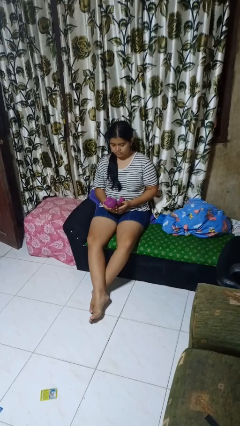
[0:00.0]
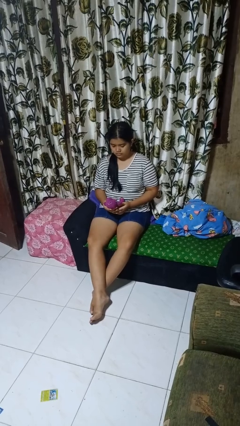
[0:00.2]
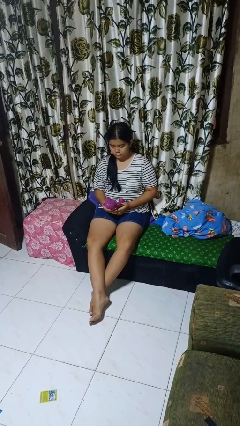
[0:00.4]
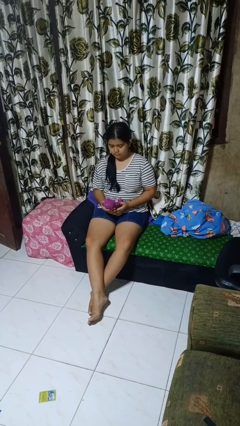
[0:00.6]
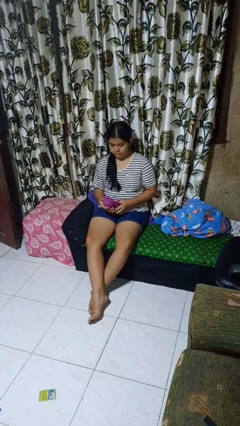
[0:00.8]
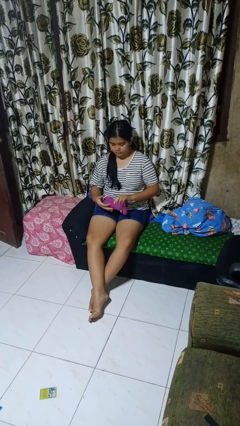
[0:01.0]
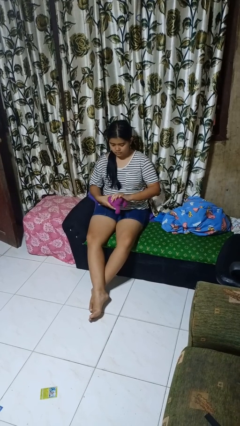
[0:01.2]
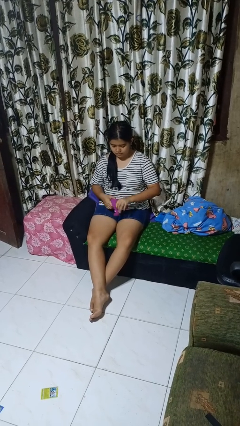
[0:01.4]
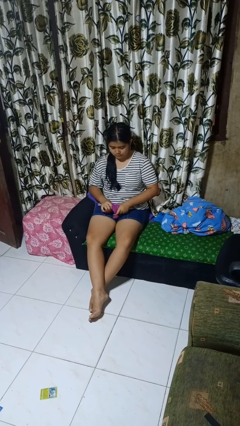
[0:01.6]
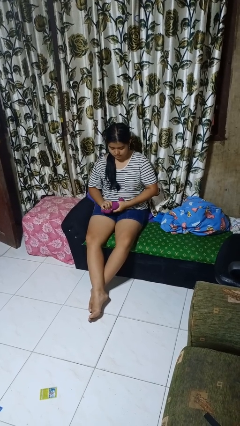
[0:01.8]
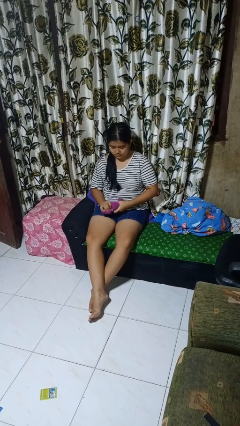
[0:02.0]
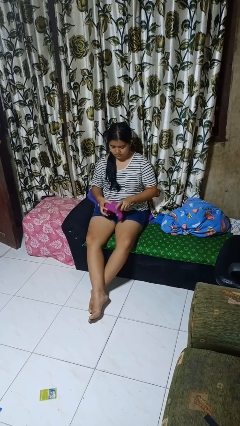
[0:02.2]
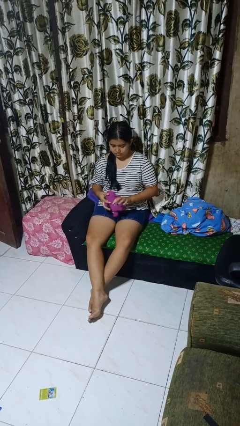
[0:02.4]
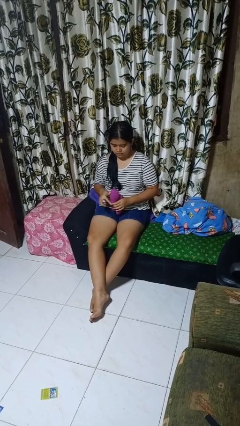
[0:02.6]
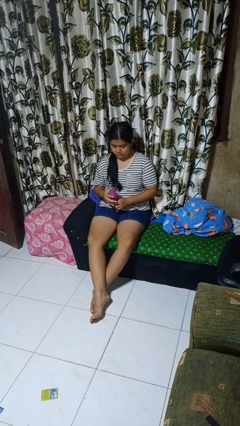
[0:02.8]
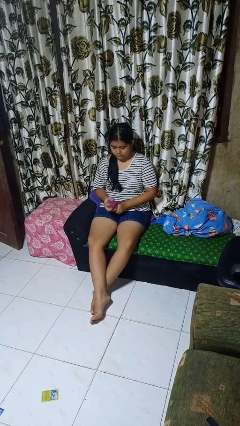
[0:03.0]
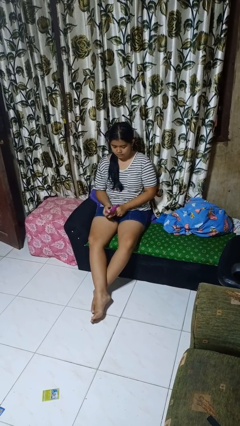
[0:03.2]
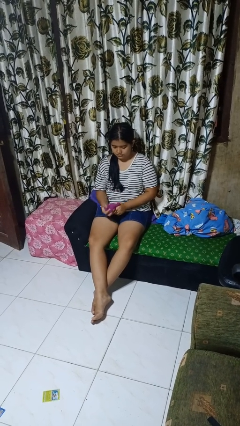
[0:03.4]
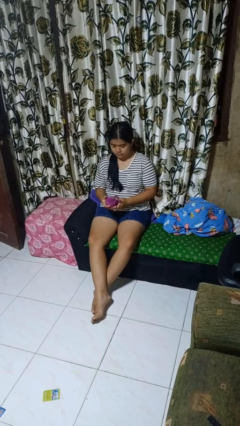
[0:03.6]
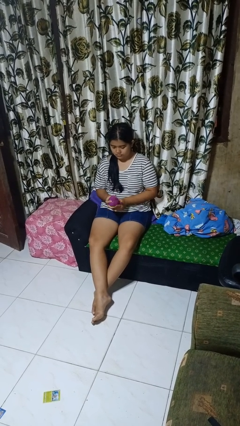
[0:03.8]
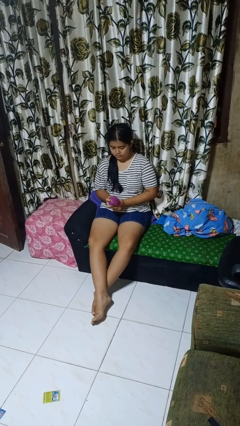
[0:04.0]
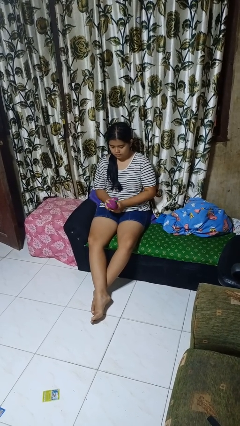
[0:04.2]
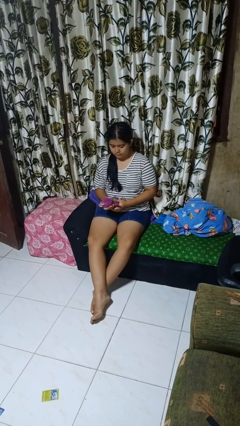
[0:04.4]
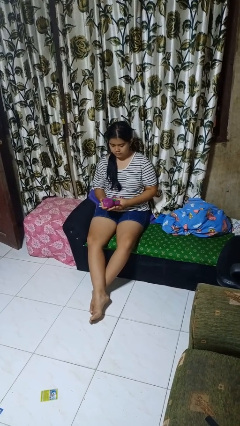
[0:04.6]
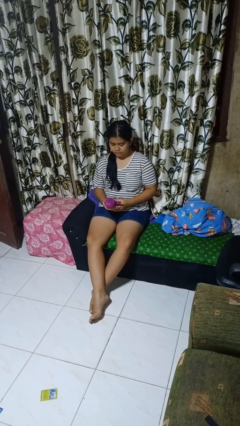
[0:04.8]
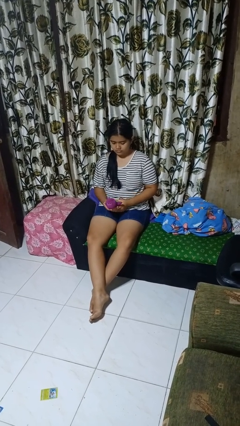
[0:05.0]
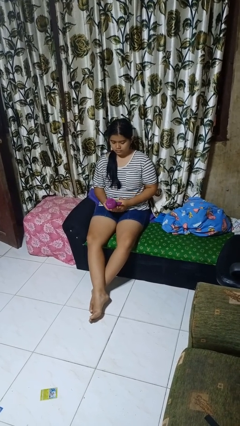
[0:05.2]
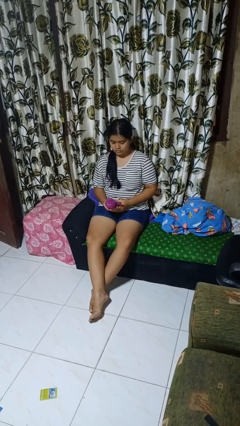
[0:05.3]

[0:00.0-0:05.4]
person squeezes object

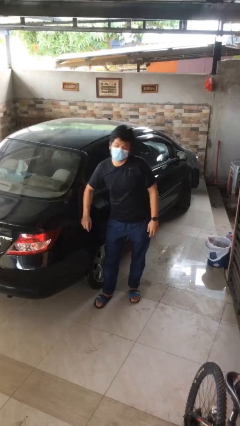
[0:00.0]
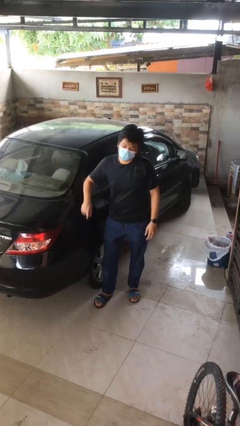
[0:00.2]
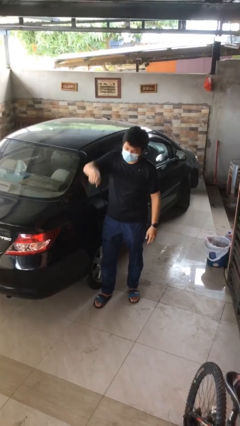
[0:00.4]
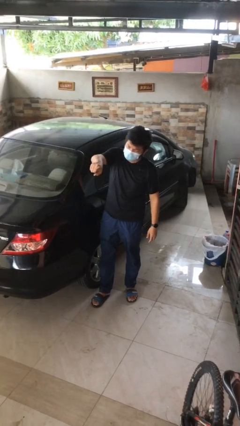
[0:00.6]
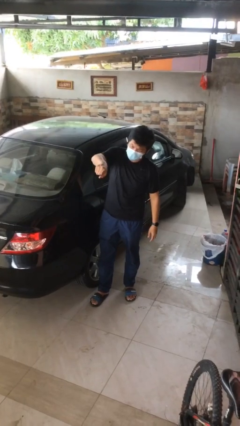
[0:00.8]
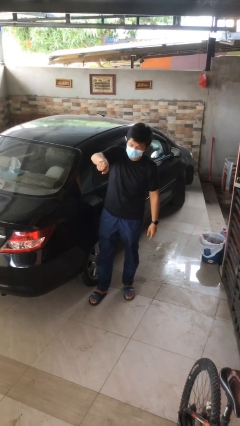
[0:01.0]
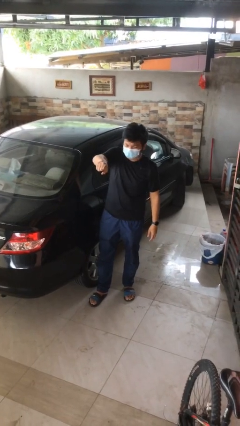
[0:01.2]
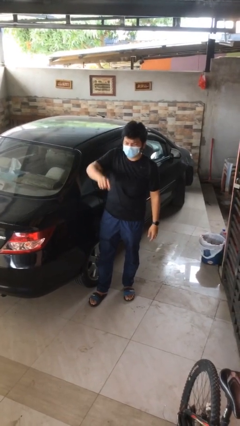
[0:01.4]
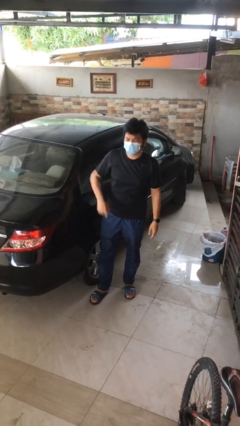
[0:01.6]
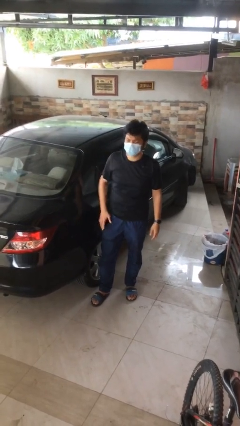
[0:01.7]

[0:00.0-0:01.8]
person points at person

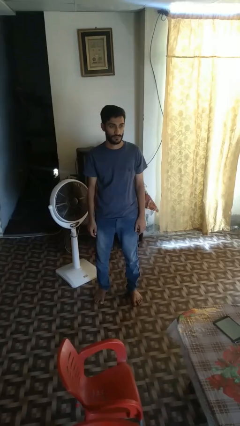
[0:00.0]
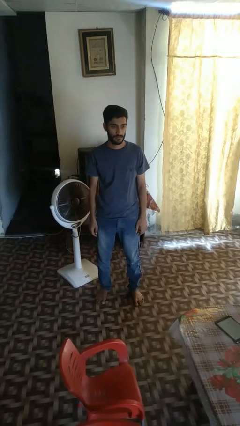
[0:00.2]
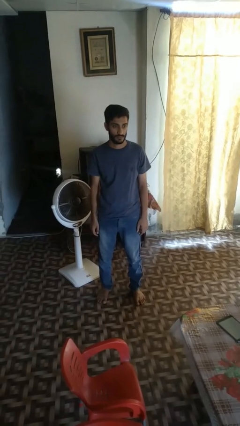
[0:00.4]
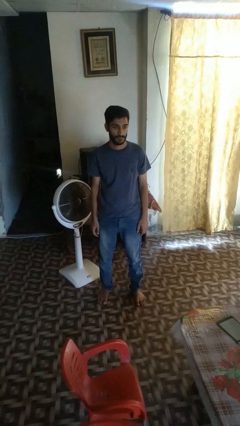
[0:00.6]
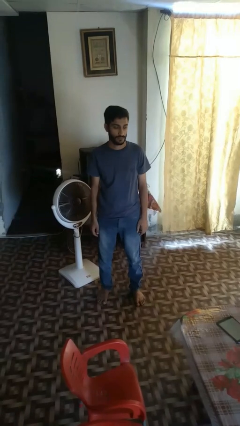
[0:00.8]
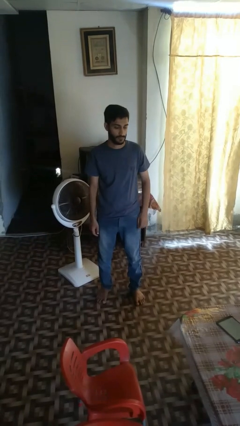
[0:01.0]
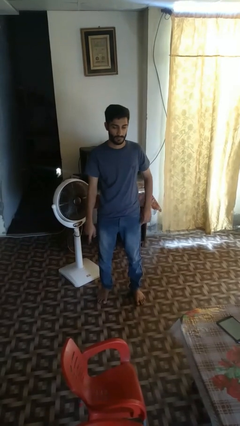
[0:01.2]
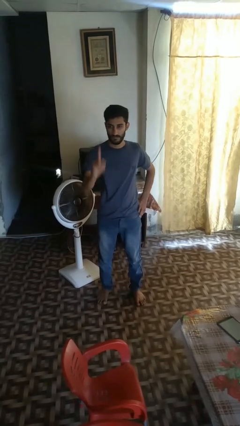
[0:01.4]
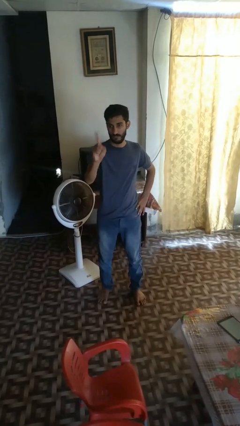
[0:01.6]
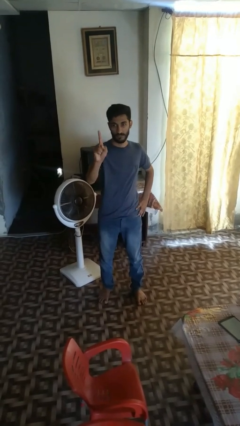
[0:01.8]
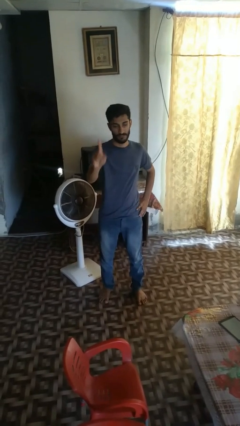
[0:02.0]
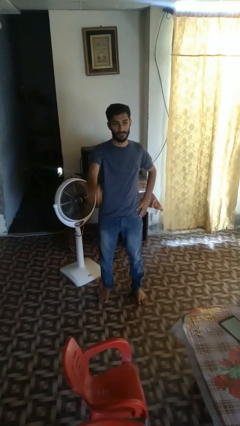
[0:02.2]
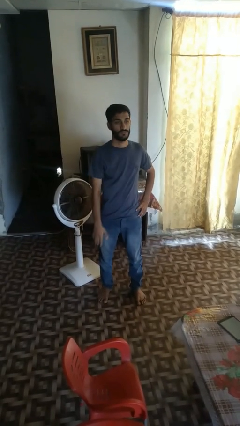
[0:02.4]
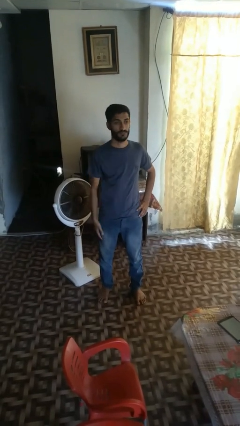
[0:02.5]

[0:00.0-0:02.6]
person gestures number one

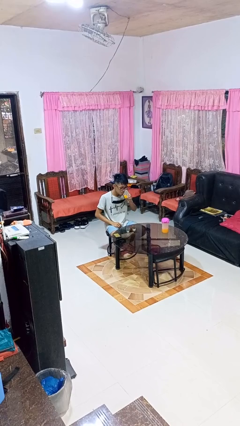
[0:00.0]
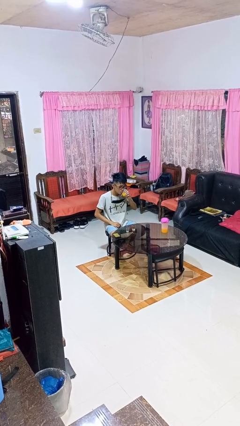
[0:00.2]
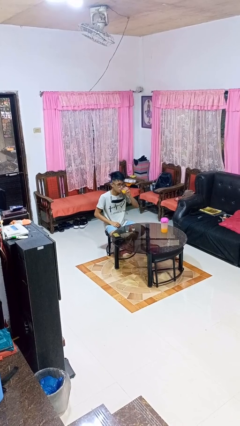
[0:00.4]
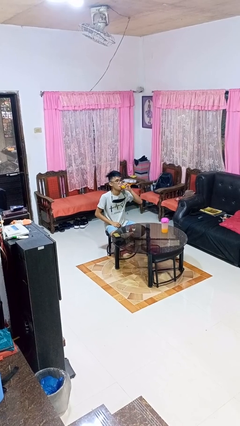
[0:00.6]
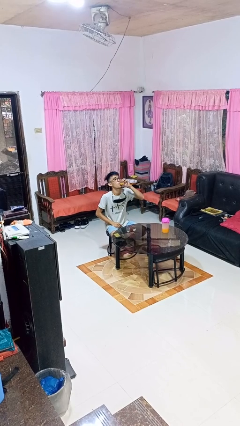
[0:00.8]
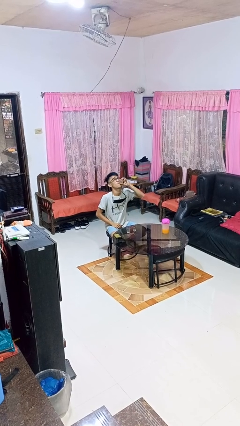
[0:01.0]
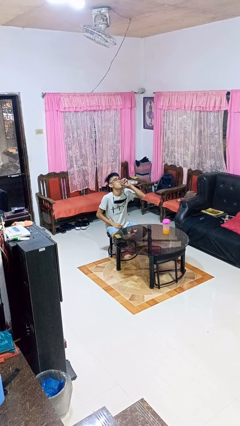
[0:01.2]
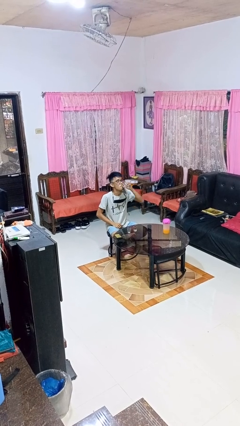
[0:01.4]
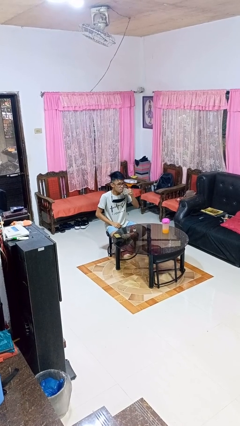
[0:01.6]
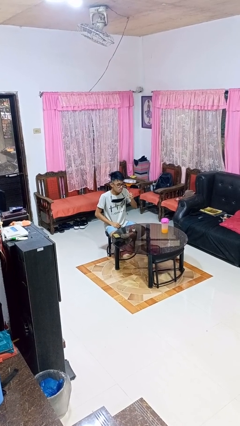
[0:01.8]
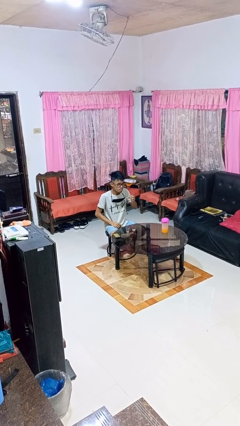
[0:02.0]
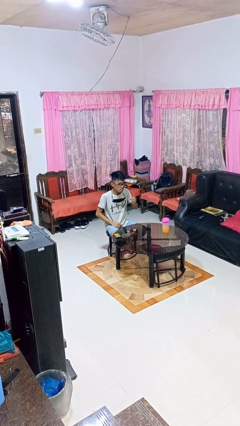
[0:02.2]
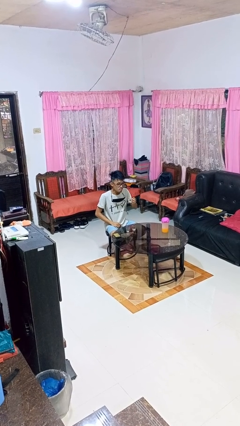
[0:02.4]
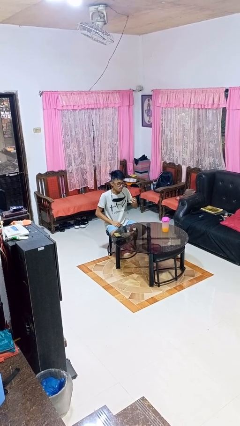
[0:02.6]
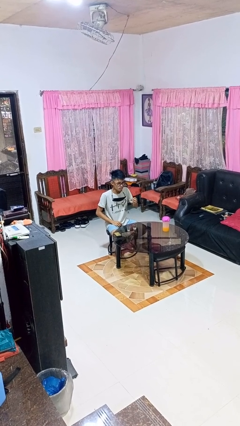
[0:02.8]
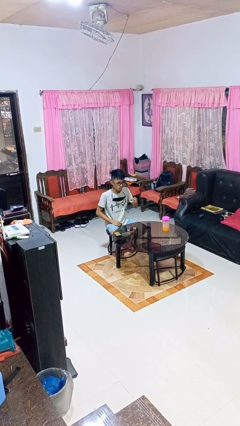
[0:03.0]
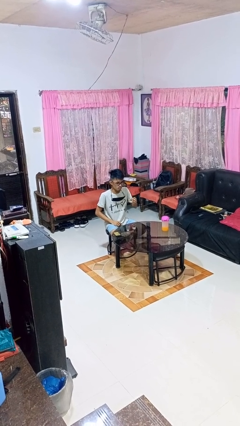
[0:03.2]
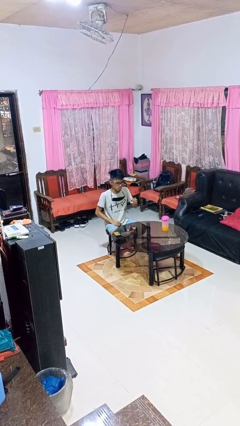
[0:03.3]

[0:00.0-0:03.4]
person drinks from shotglass

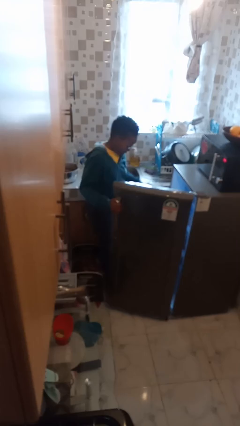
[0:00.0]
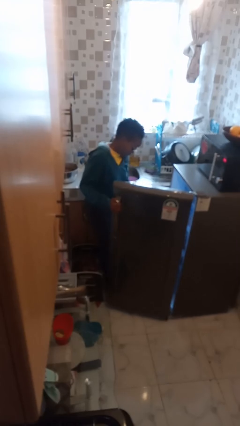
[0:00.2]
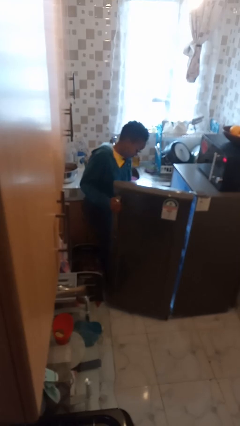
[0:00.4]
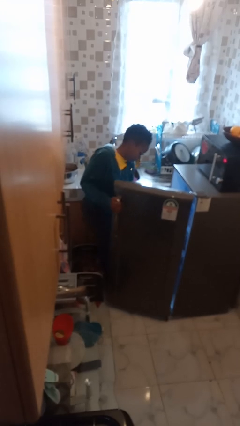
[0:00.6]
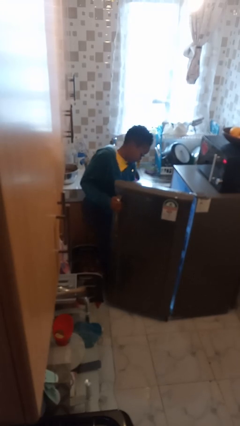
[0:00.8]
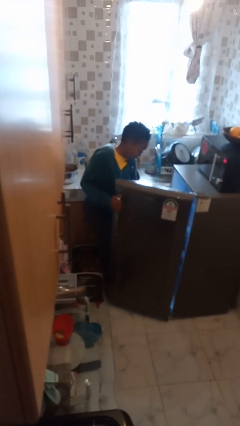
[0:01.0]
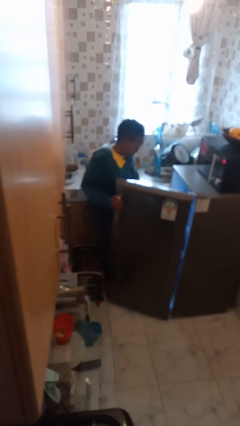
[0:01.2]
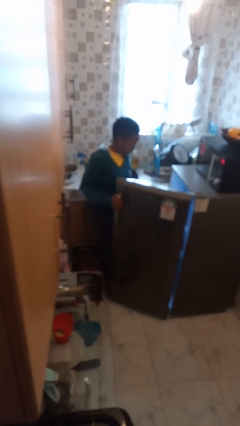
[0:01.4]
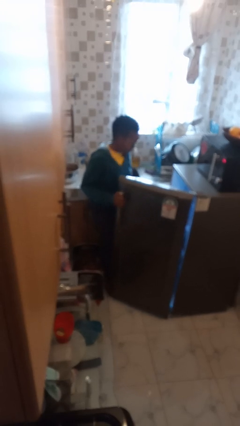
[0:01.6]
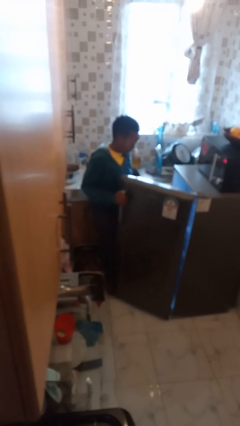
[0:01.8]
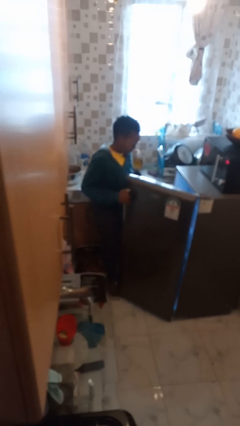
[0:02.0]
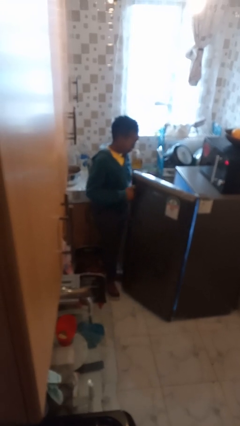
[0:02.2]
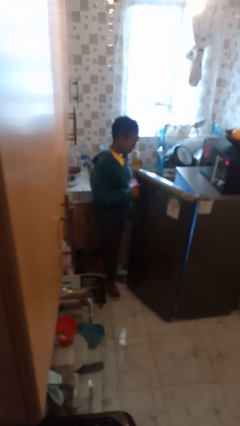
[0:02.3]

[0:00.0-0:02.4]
person puts object into refrigerator

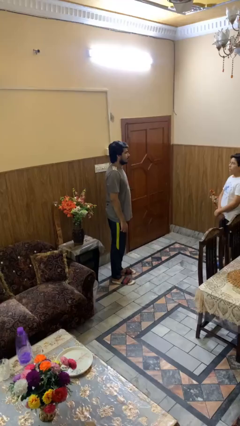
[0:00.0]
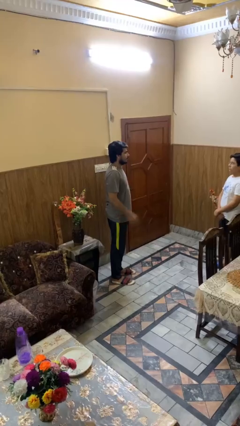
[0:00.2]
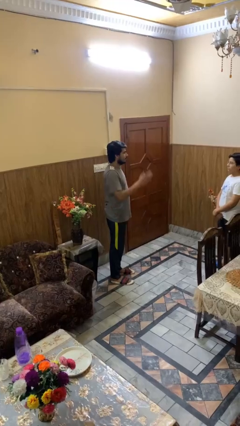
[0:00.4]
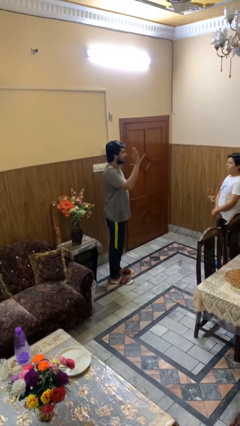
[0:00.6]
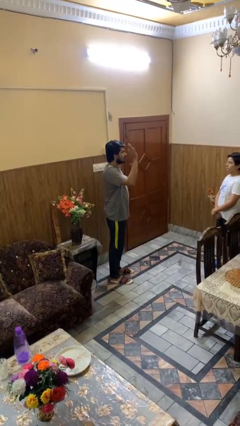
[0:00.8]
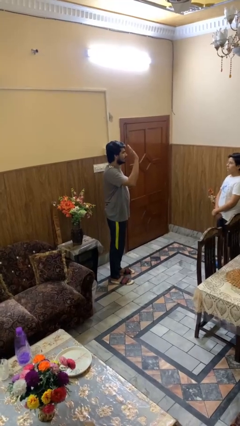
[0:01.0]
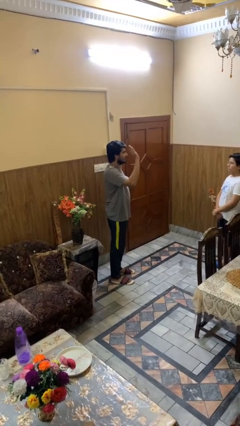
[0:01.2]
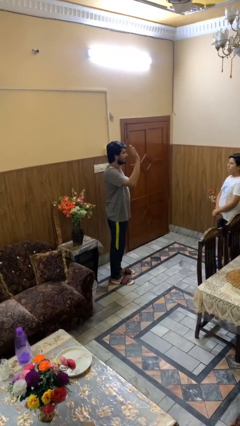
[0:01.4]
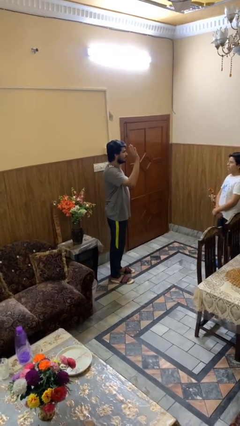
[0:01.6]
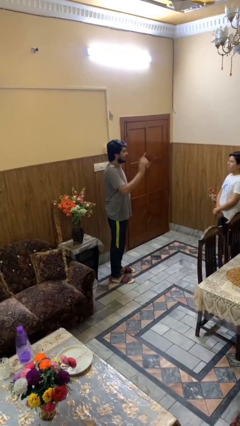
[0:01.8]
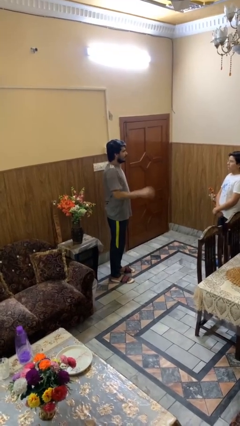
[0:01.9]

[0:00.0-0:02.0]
person waves at person
